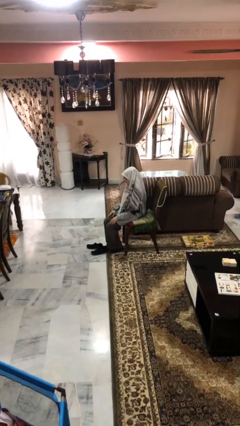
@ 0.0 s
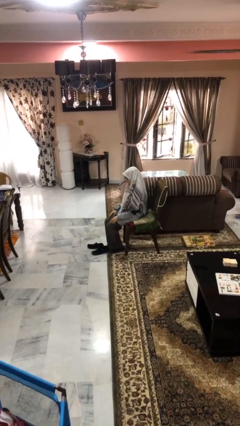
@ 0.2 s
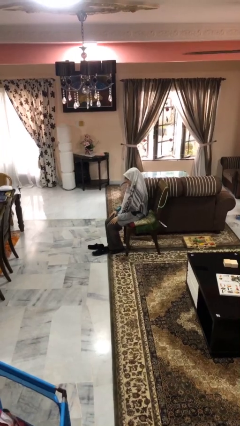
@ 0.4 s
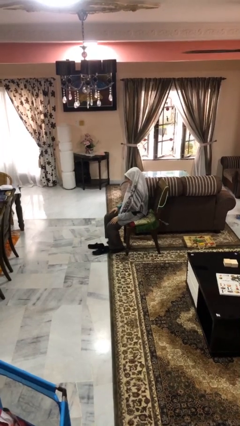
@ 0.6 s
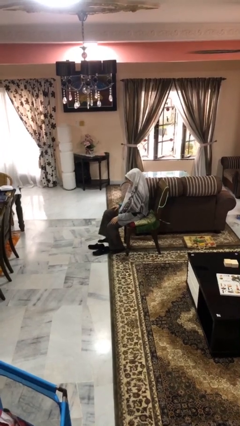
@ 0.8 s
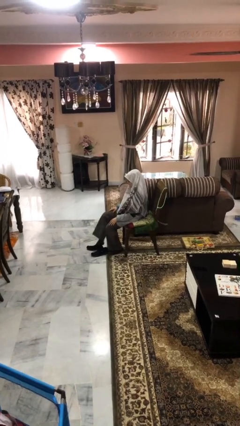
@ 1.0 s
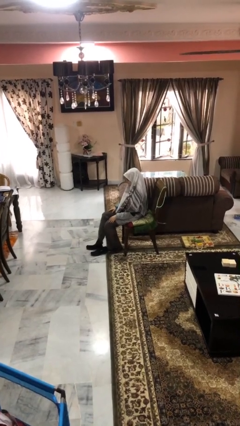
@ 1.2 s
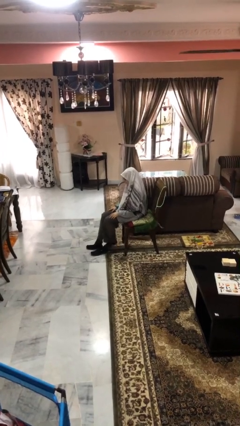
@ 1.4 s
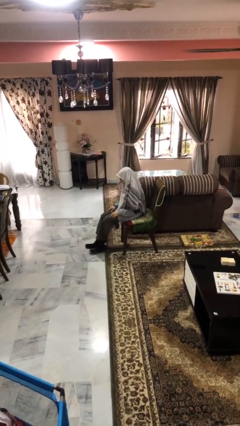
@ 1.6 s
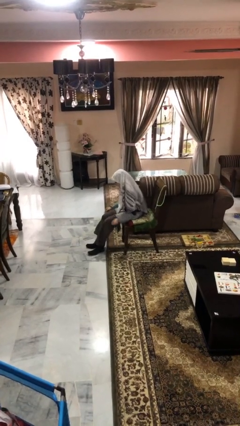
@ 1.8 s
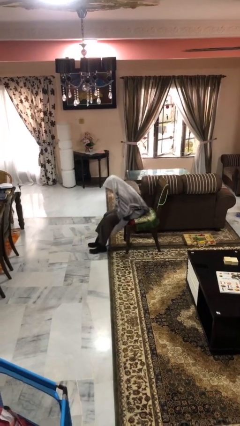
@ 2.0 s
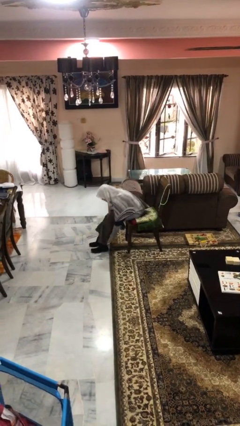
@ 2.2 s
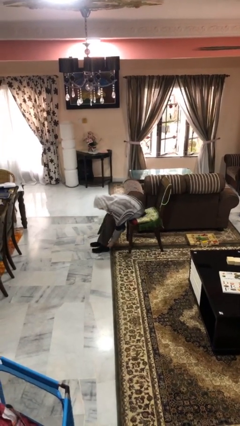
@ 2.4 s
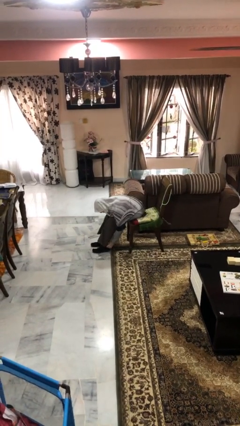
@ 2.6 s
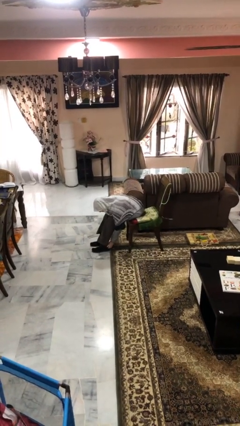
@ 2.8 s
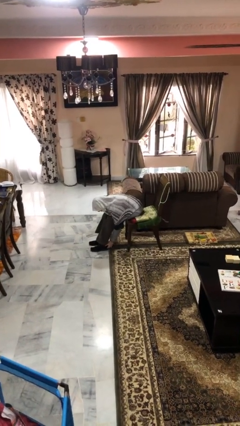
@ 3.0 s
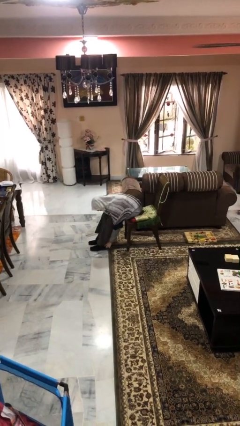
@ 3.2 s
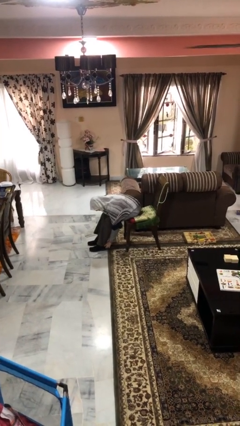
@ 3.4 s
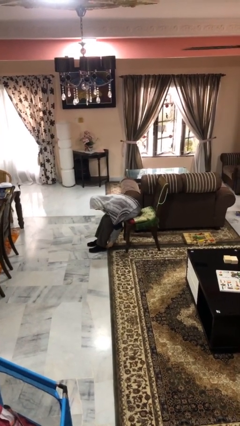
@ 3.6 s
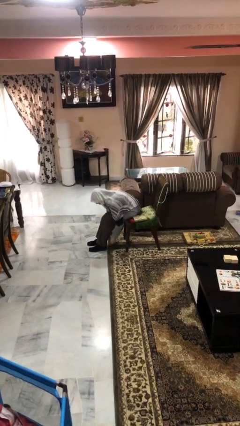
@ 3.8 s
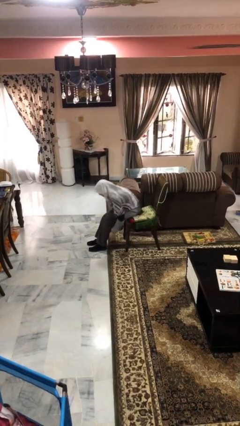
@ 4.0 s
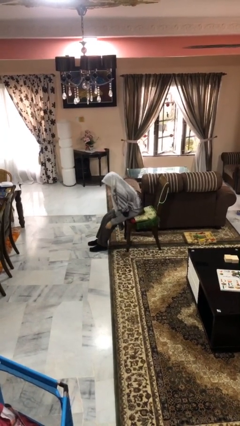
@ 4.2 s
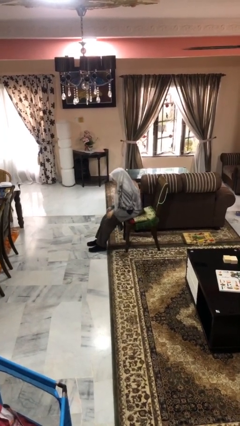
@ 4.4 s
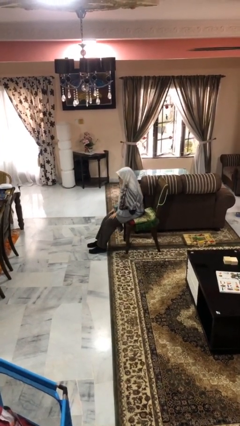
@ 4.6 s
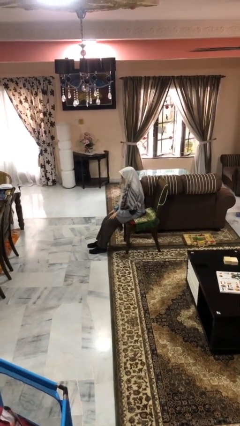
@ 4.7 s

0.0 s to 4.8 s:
person puts on shoes

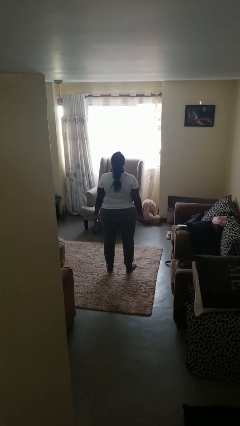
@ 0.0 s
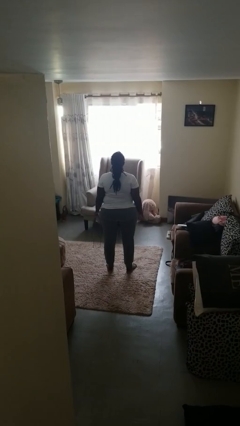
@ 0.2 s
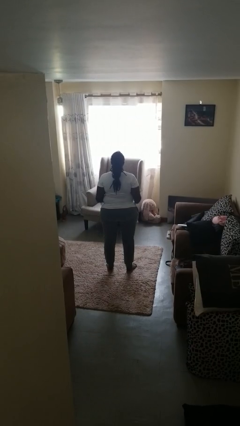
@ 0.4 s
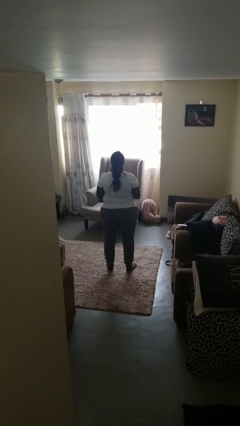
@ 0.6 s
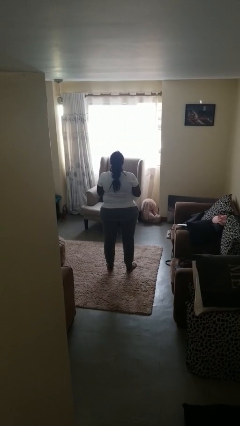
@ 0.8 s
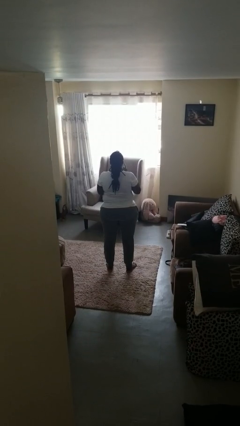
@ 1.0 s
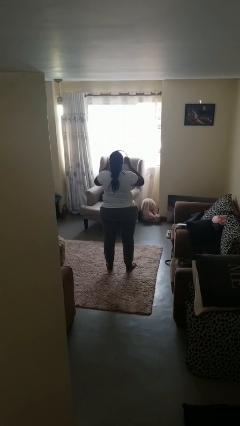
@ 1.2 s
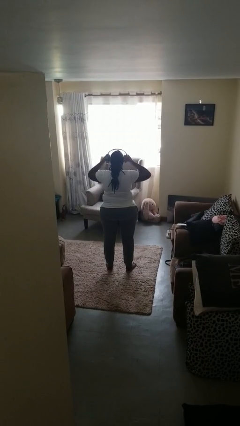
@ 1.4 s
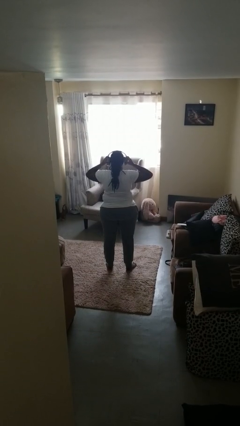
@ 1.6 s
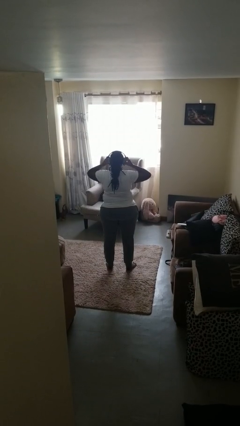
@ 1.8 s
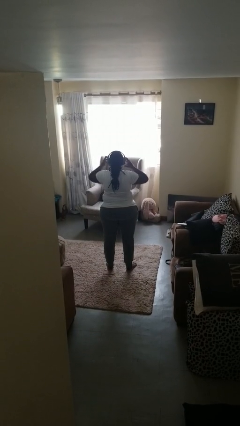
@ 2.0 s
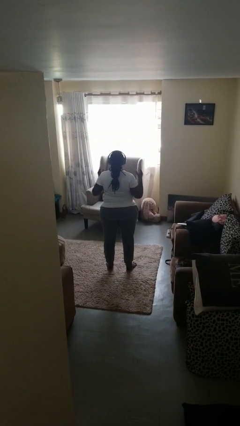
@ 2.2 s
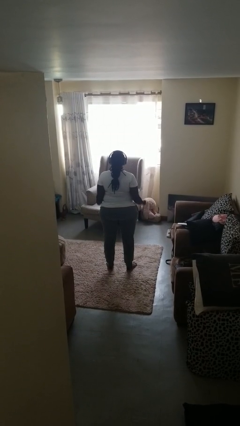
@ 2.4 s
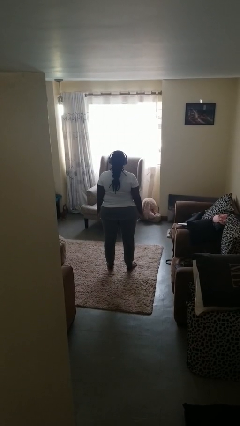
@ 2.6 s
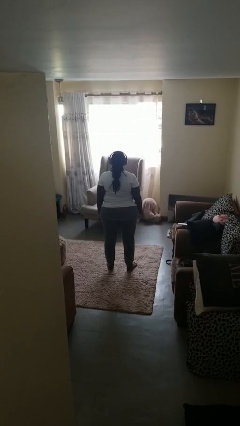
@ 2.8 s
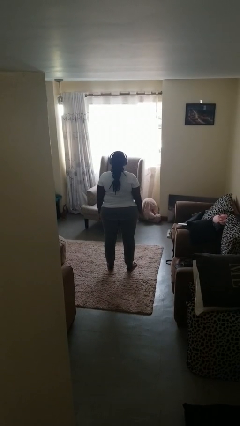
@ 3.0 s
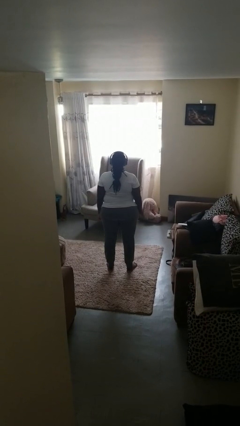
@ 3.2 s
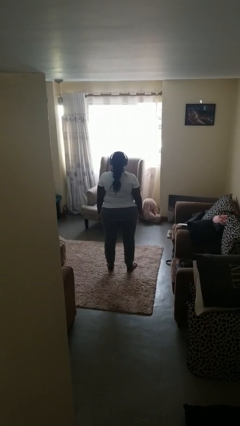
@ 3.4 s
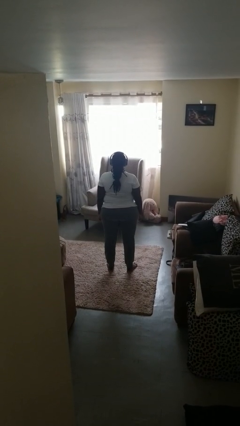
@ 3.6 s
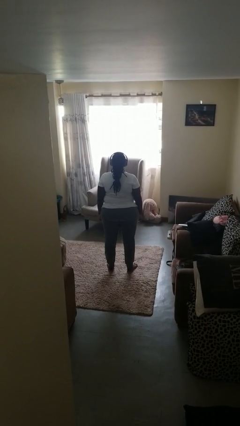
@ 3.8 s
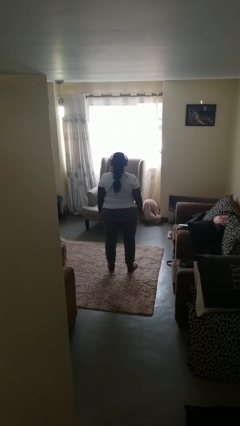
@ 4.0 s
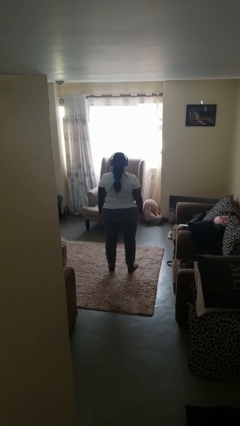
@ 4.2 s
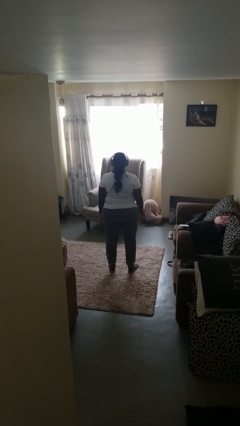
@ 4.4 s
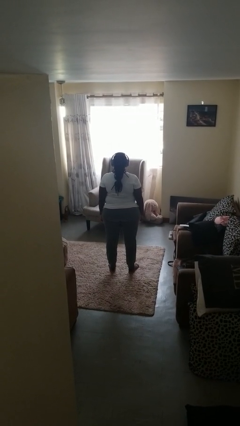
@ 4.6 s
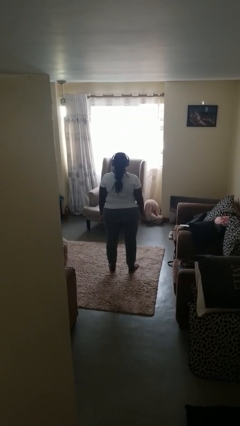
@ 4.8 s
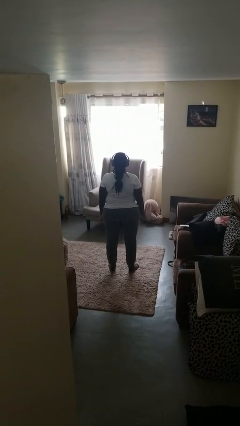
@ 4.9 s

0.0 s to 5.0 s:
person puts on headphones

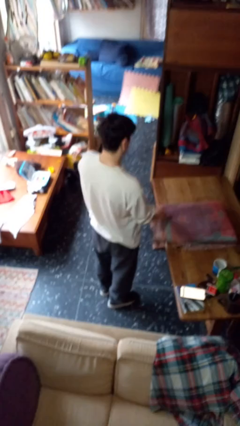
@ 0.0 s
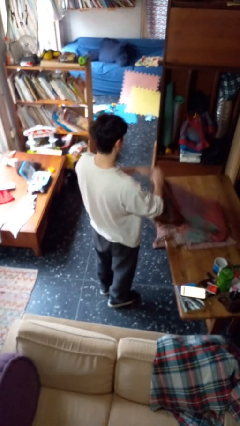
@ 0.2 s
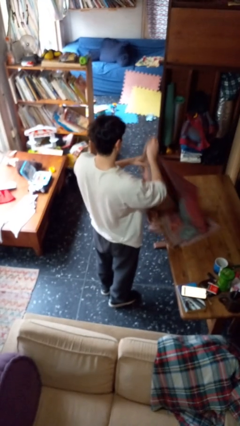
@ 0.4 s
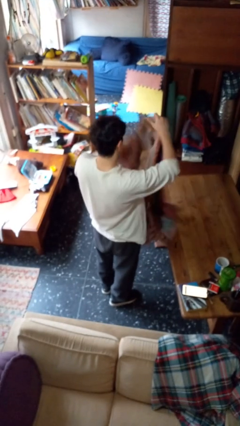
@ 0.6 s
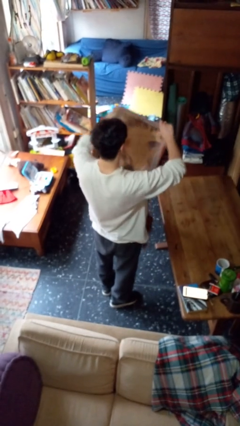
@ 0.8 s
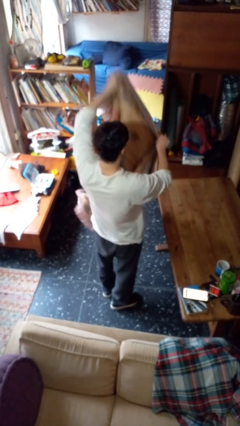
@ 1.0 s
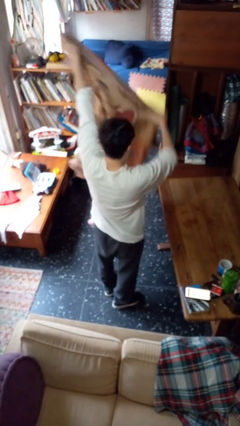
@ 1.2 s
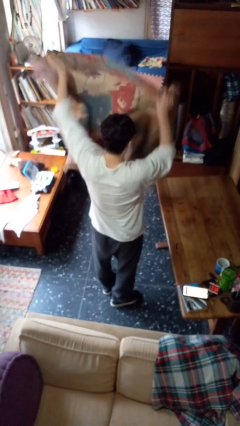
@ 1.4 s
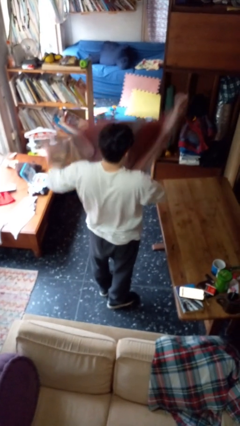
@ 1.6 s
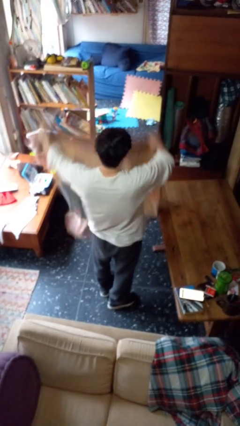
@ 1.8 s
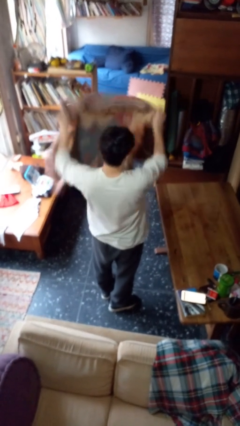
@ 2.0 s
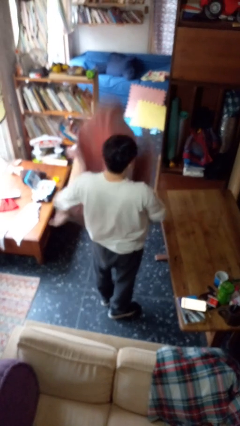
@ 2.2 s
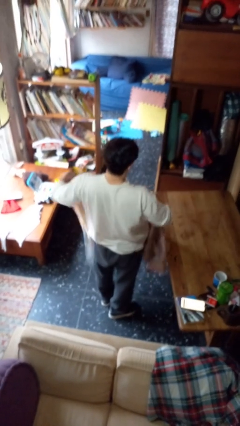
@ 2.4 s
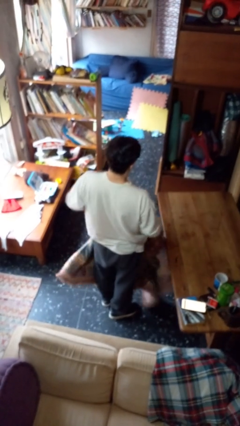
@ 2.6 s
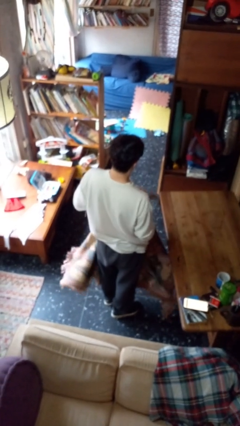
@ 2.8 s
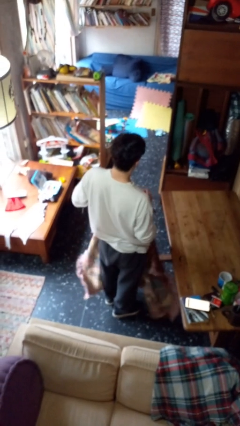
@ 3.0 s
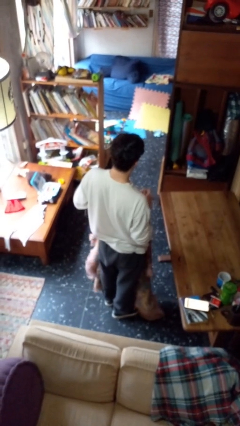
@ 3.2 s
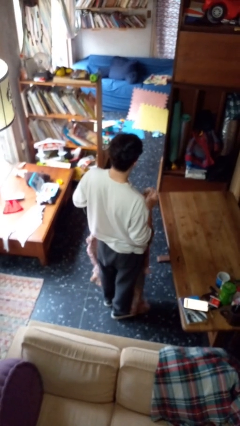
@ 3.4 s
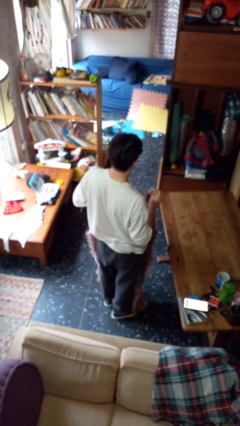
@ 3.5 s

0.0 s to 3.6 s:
person unfolds blanket

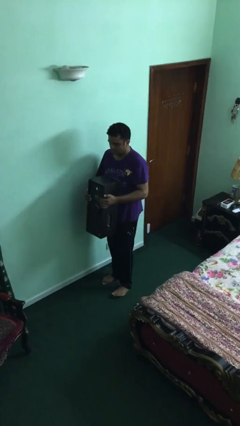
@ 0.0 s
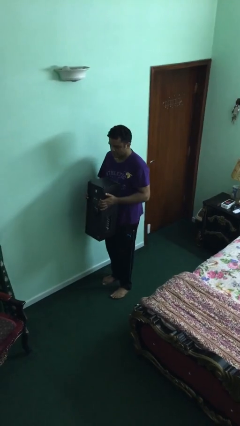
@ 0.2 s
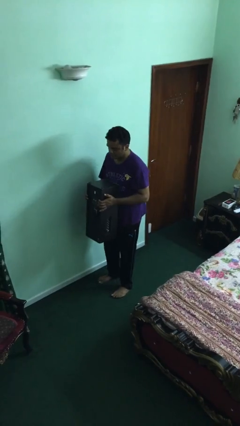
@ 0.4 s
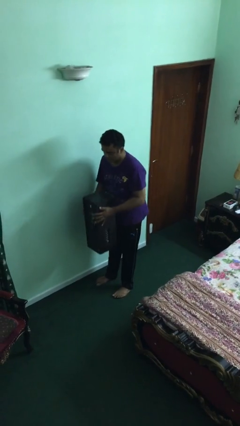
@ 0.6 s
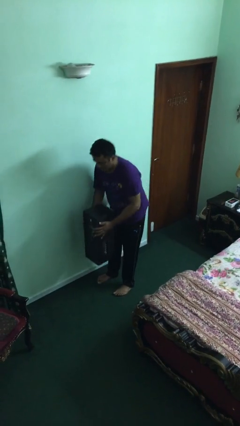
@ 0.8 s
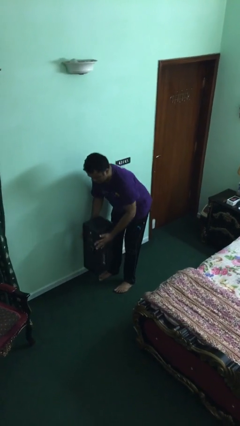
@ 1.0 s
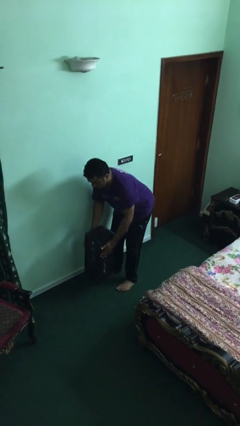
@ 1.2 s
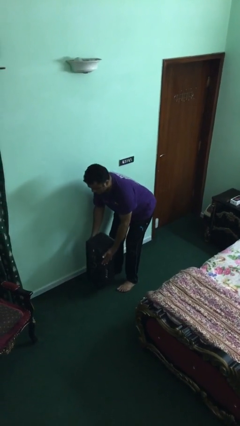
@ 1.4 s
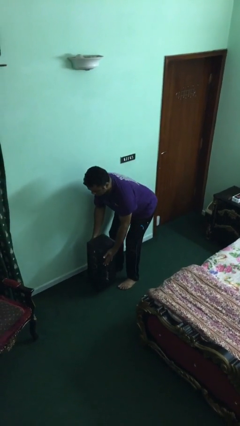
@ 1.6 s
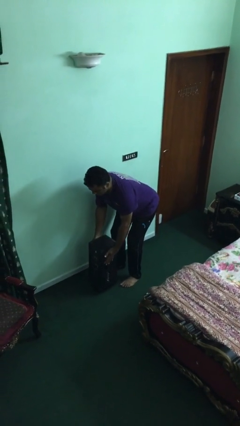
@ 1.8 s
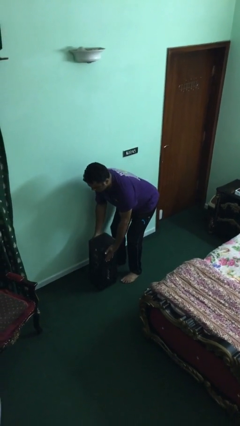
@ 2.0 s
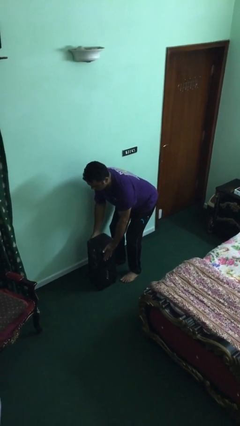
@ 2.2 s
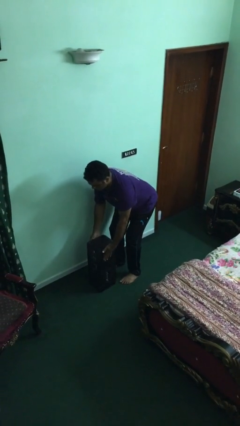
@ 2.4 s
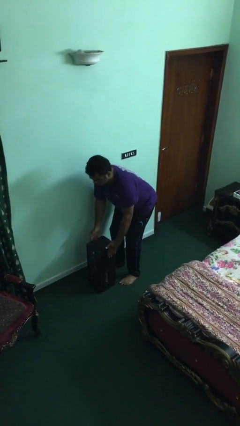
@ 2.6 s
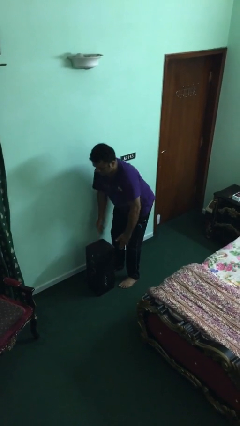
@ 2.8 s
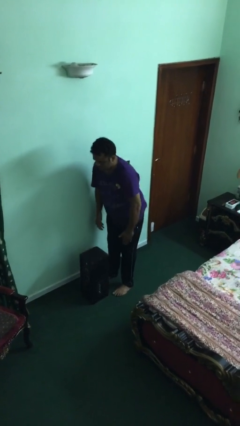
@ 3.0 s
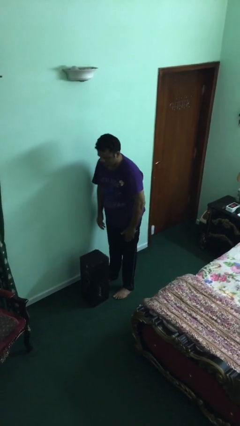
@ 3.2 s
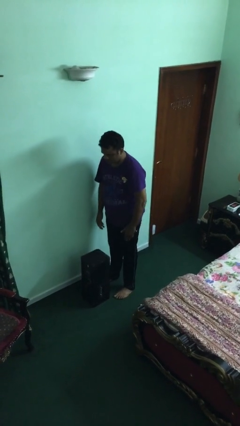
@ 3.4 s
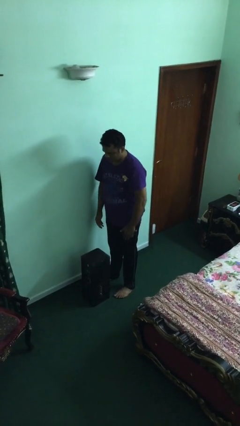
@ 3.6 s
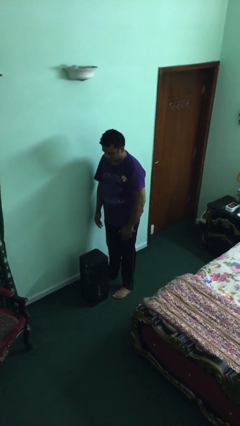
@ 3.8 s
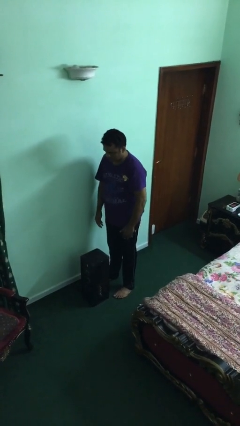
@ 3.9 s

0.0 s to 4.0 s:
person puts down object on floor
